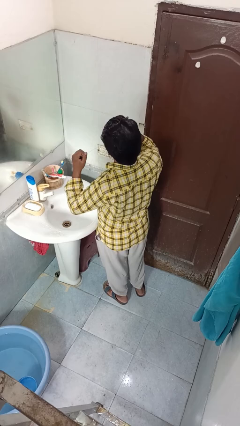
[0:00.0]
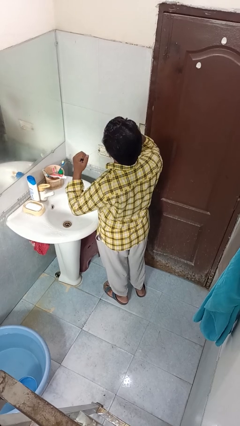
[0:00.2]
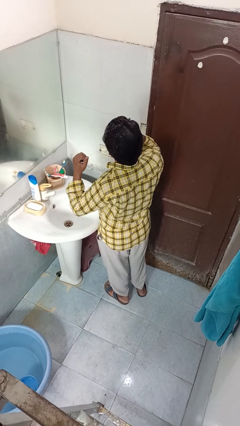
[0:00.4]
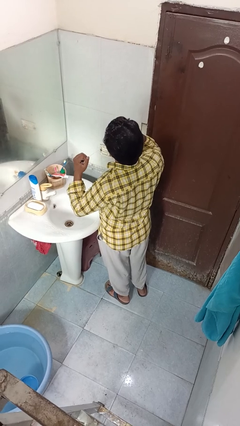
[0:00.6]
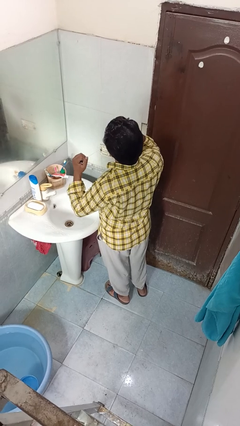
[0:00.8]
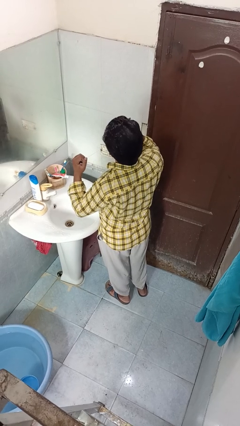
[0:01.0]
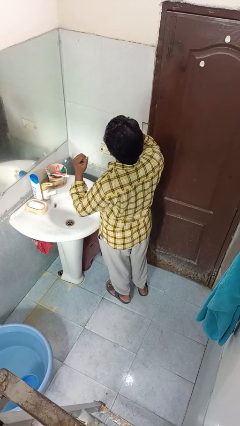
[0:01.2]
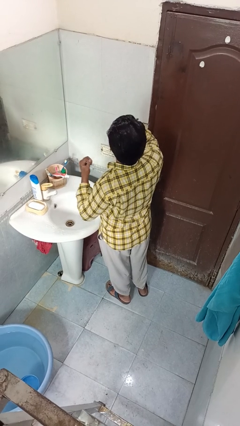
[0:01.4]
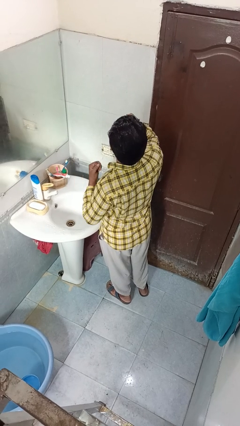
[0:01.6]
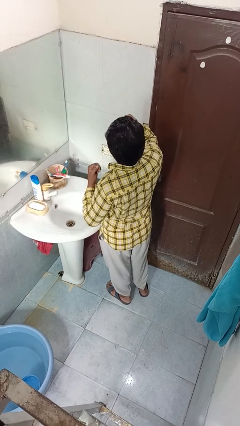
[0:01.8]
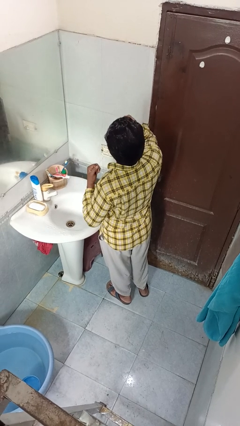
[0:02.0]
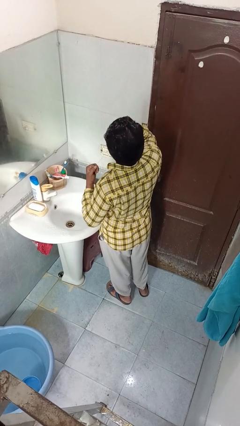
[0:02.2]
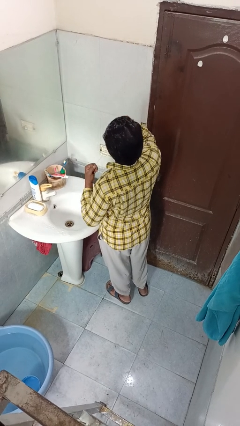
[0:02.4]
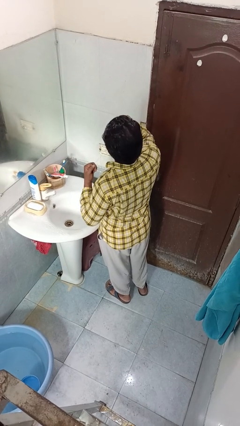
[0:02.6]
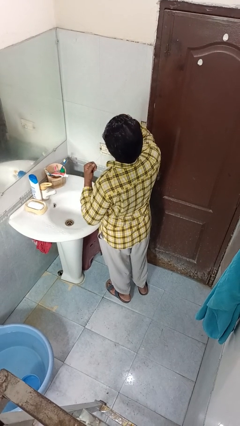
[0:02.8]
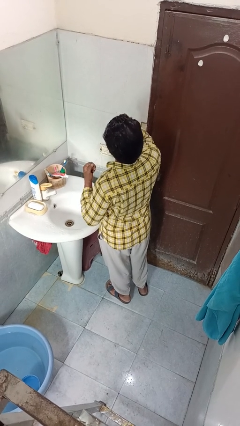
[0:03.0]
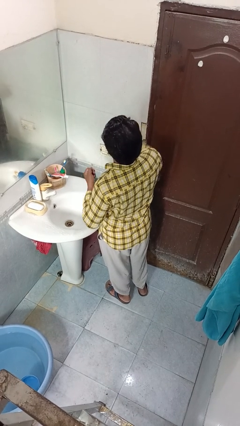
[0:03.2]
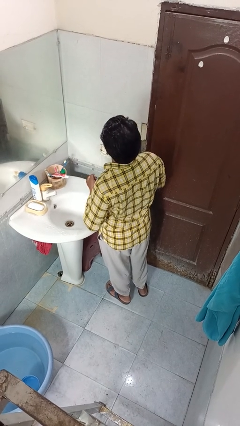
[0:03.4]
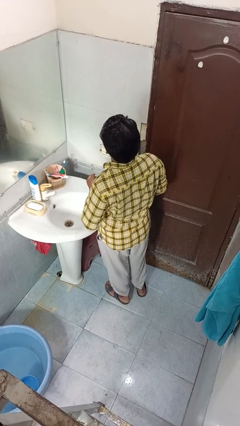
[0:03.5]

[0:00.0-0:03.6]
person flosses

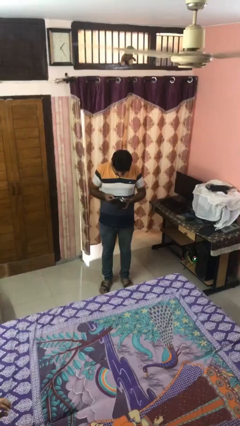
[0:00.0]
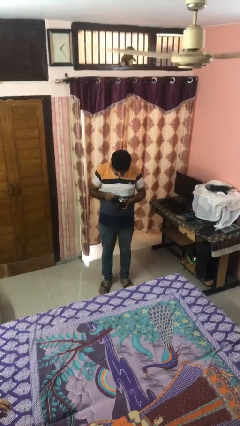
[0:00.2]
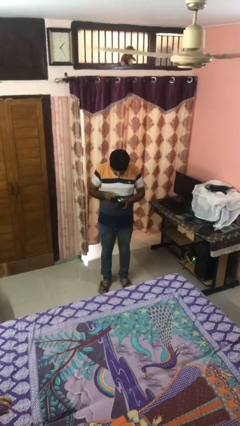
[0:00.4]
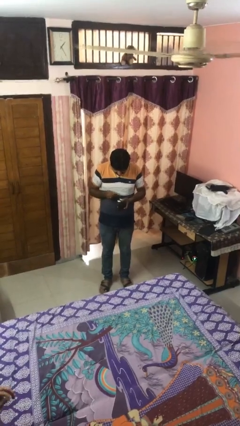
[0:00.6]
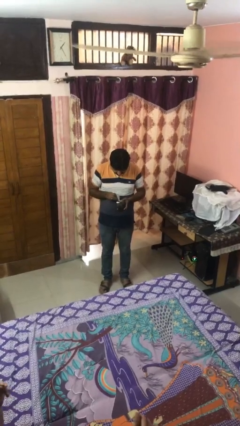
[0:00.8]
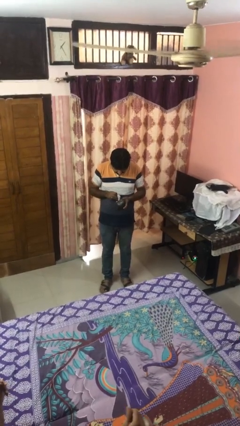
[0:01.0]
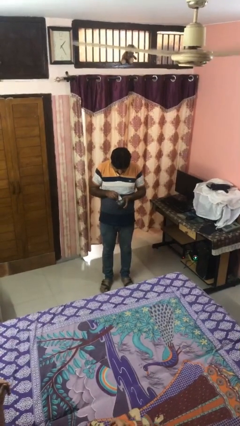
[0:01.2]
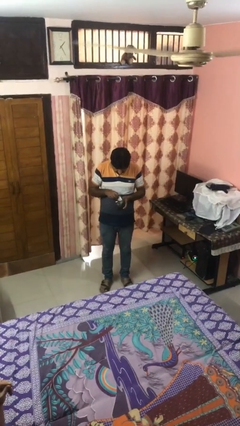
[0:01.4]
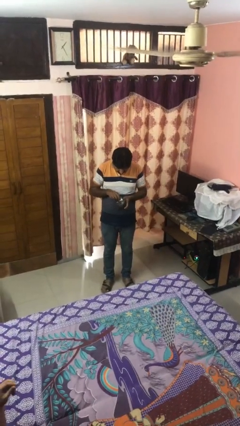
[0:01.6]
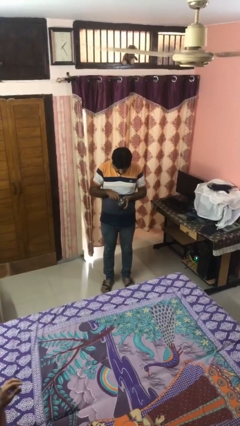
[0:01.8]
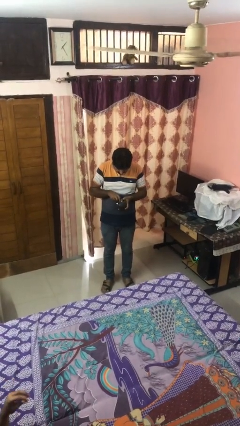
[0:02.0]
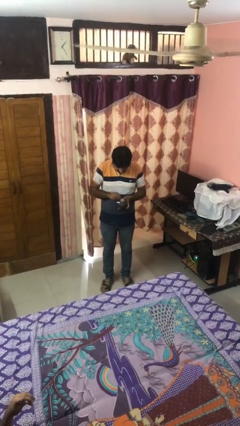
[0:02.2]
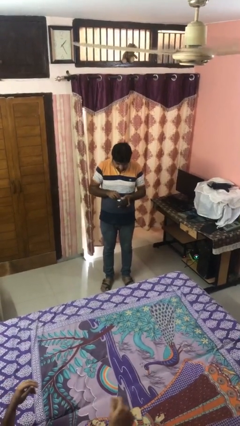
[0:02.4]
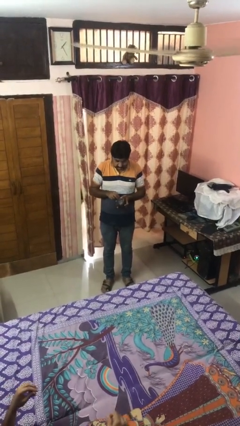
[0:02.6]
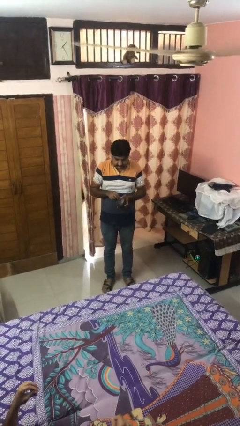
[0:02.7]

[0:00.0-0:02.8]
person puts object into purse

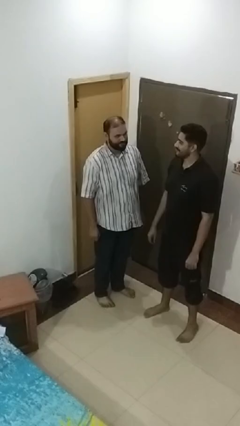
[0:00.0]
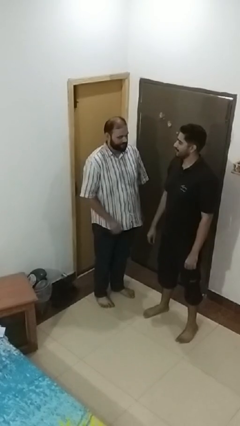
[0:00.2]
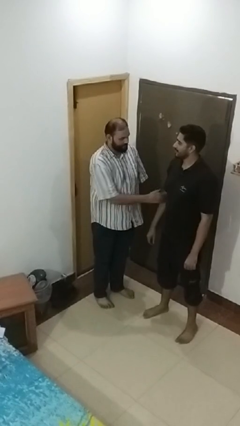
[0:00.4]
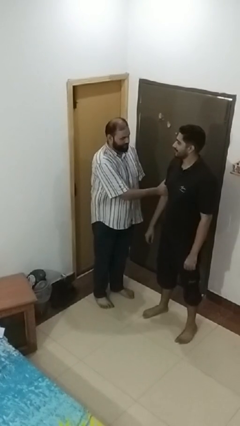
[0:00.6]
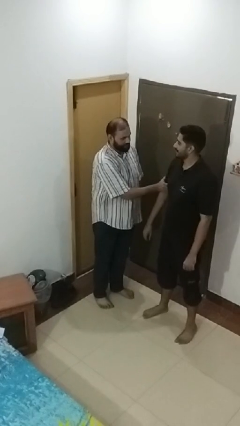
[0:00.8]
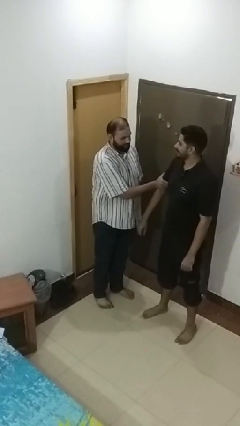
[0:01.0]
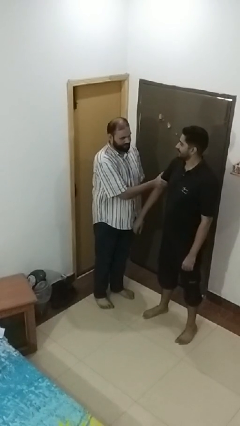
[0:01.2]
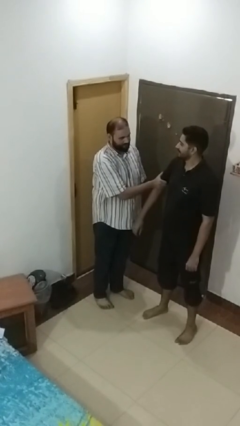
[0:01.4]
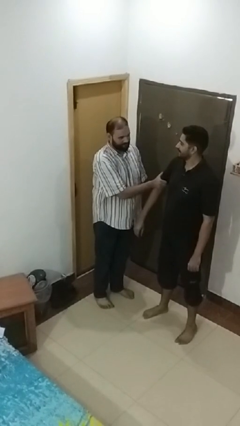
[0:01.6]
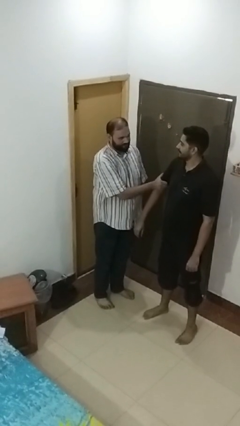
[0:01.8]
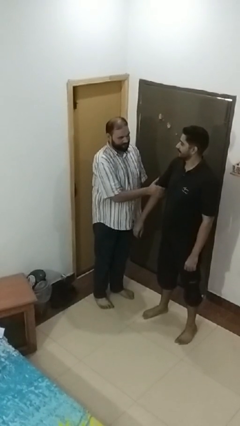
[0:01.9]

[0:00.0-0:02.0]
person grabs person by bicep

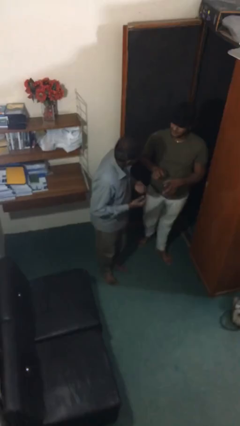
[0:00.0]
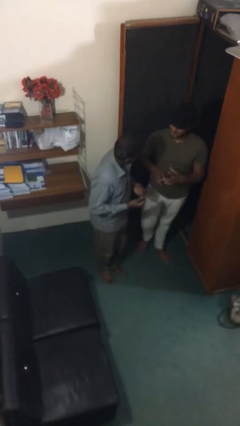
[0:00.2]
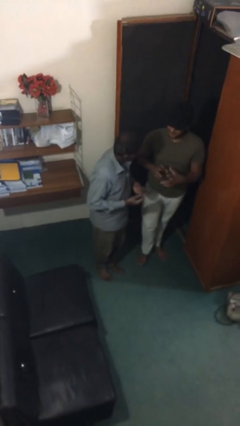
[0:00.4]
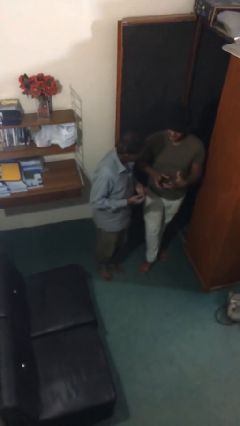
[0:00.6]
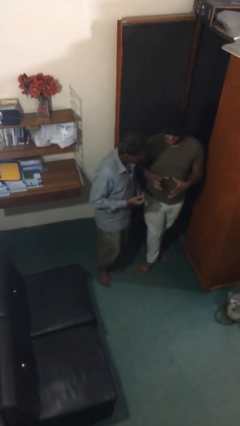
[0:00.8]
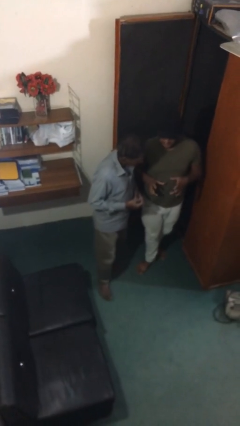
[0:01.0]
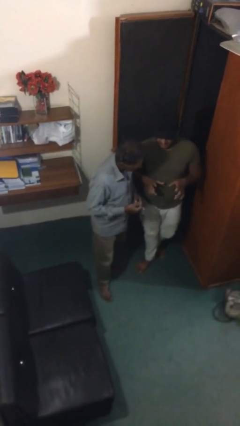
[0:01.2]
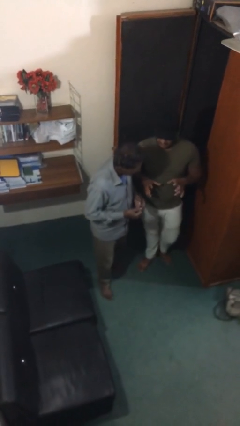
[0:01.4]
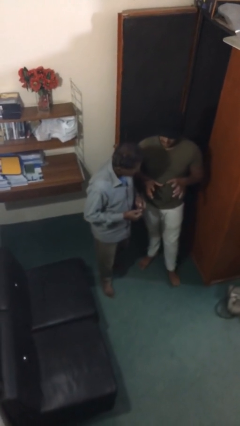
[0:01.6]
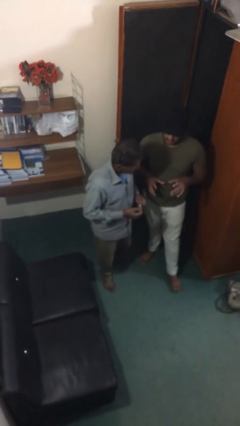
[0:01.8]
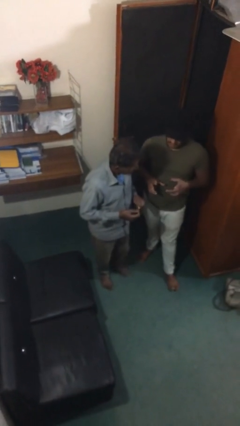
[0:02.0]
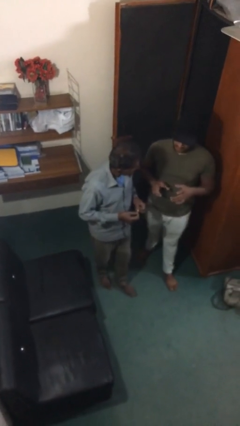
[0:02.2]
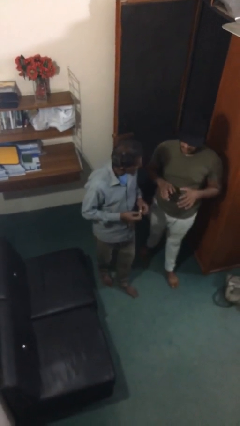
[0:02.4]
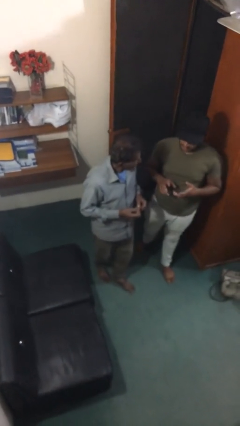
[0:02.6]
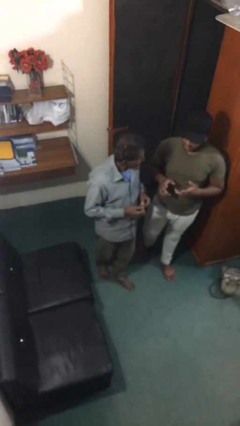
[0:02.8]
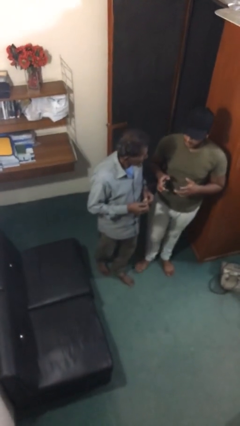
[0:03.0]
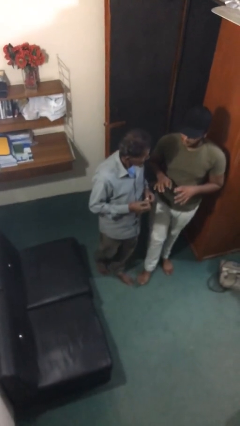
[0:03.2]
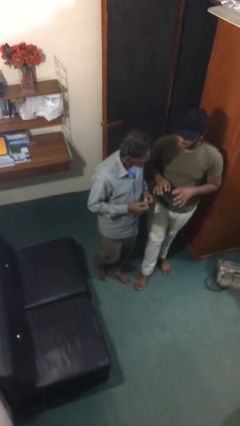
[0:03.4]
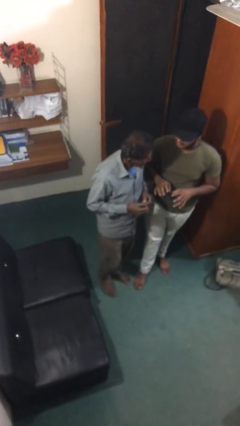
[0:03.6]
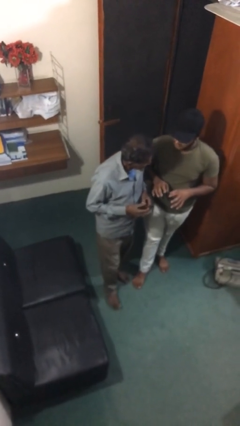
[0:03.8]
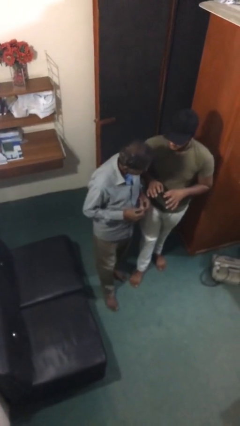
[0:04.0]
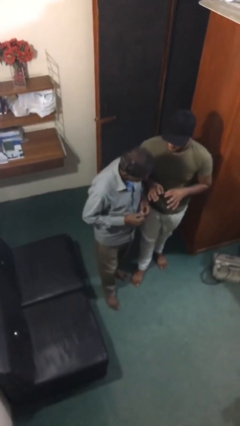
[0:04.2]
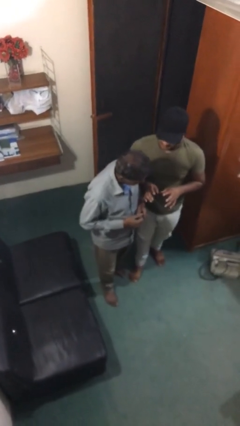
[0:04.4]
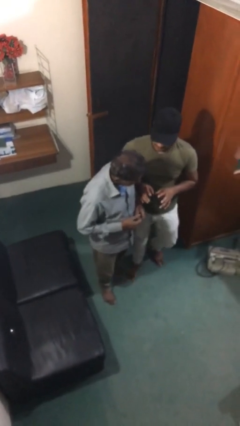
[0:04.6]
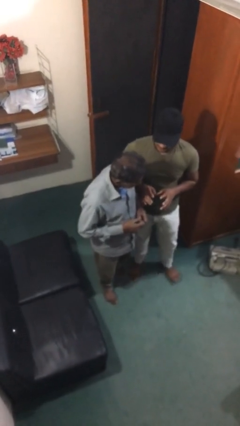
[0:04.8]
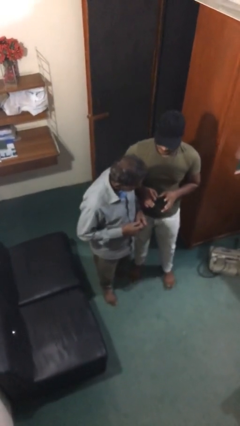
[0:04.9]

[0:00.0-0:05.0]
person talks to person

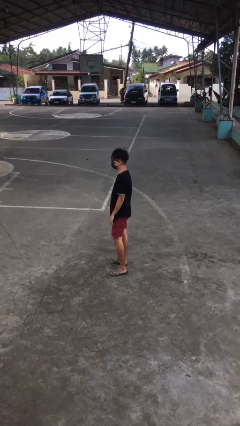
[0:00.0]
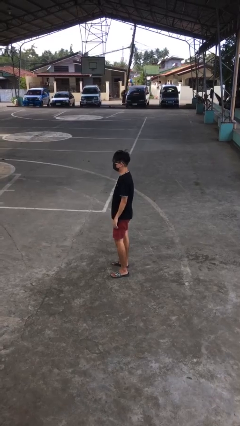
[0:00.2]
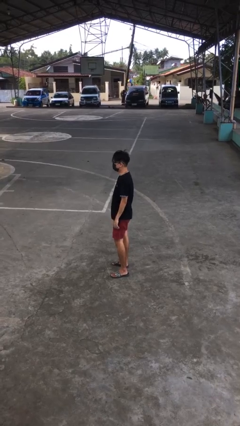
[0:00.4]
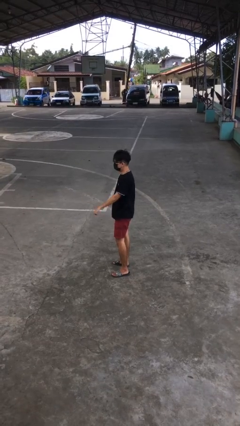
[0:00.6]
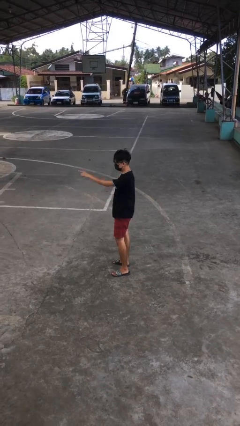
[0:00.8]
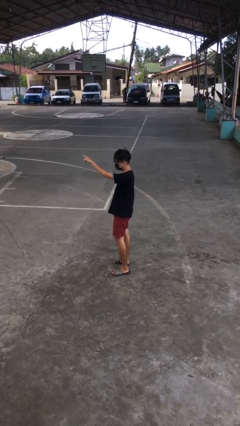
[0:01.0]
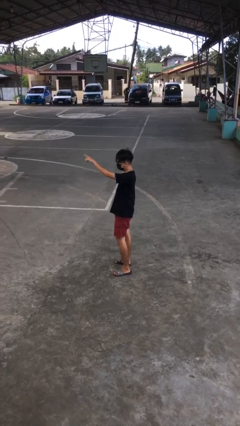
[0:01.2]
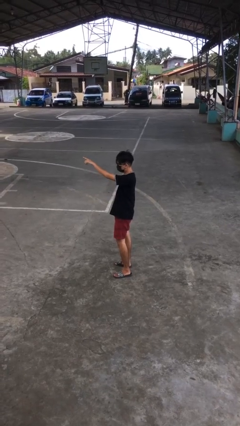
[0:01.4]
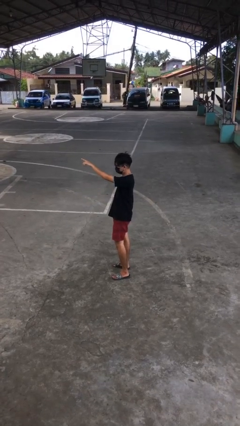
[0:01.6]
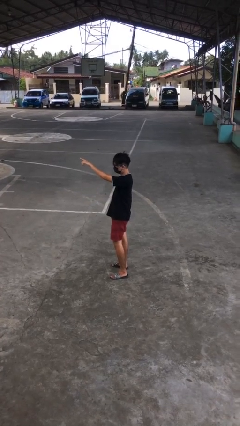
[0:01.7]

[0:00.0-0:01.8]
person points at person

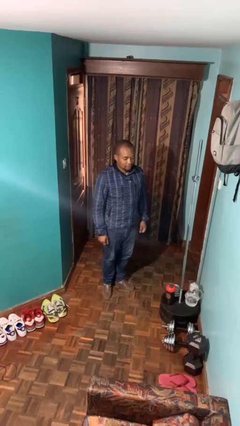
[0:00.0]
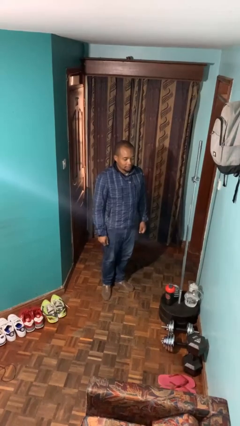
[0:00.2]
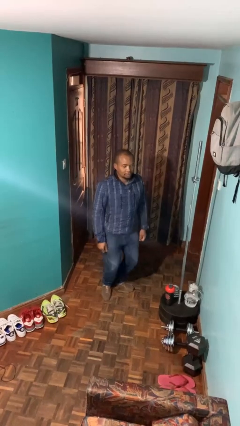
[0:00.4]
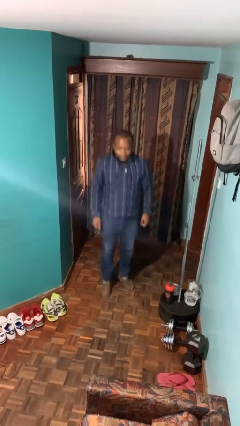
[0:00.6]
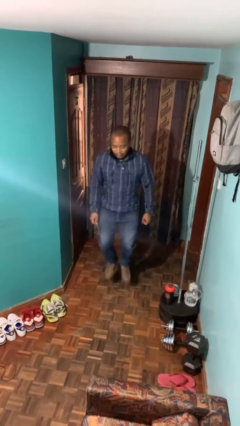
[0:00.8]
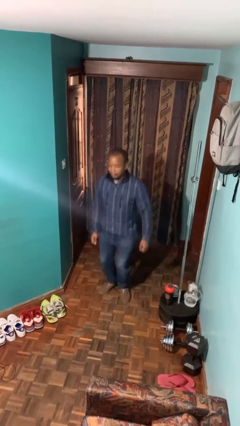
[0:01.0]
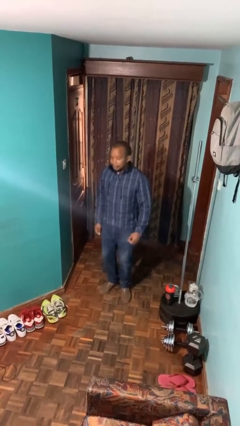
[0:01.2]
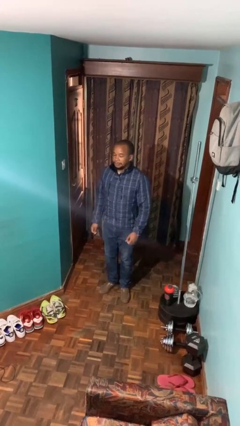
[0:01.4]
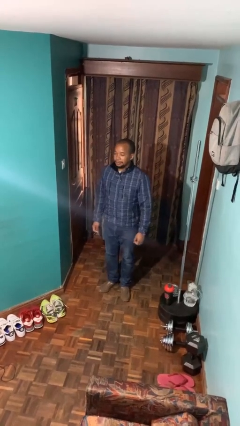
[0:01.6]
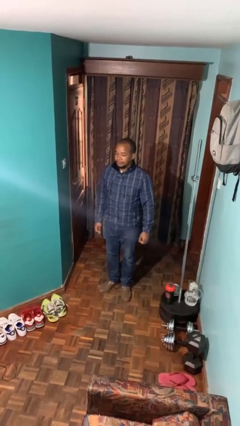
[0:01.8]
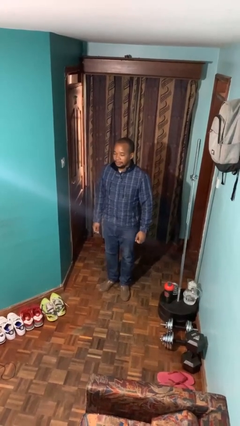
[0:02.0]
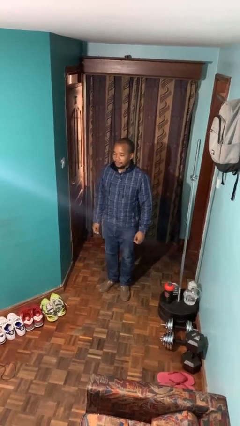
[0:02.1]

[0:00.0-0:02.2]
person jumps

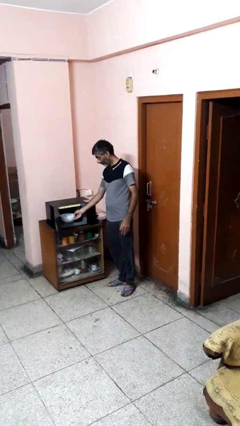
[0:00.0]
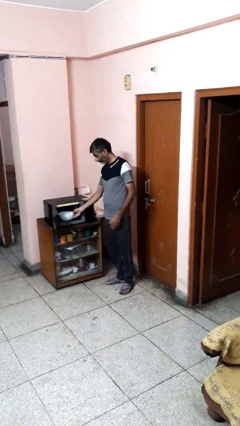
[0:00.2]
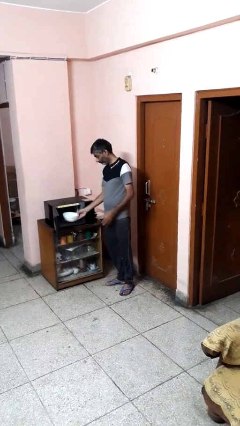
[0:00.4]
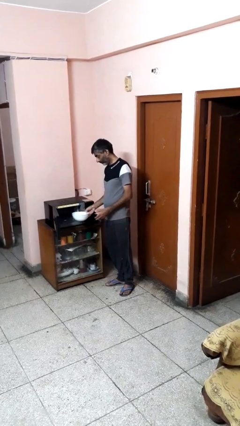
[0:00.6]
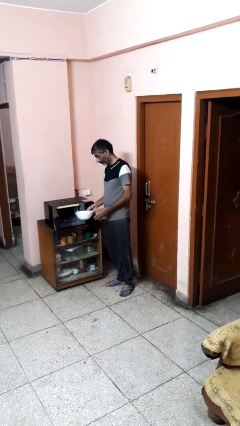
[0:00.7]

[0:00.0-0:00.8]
person takes object from microwave
